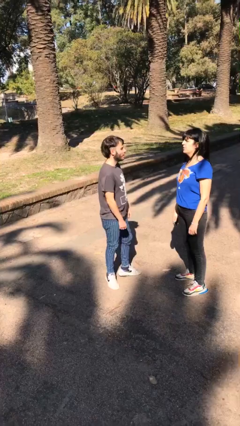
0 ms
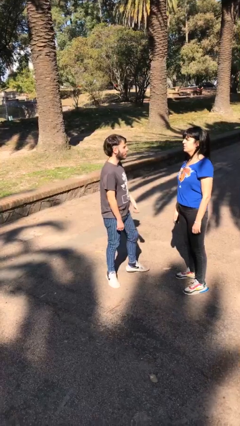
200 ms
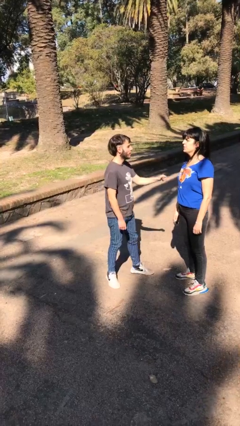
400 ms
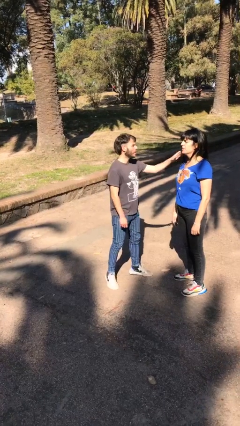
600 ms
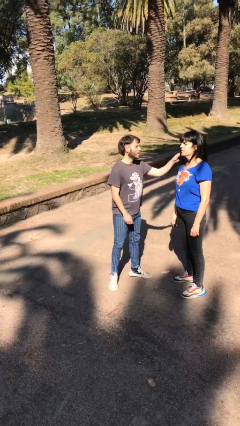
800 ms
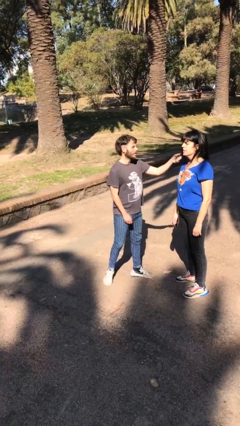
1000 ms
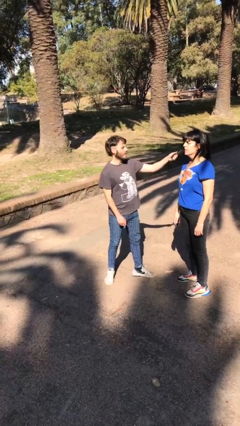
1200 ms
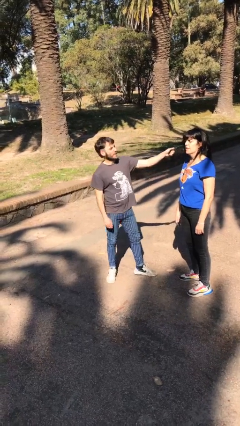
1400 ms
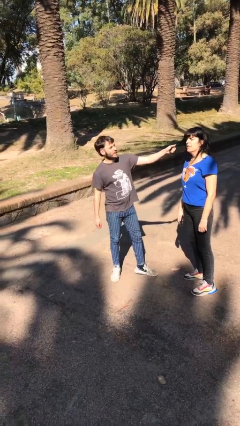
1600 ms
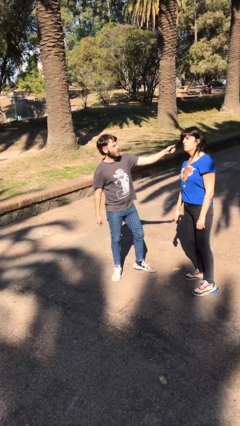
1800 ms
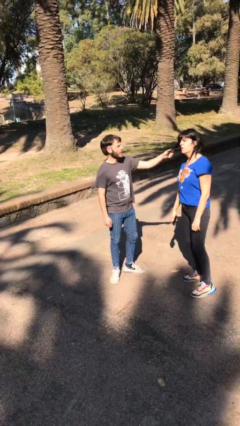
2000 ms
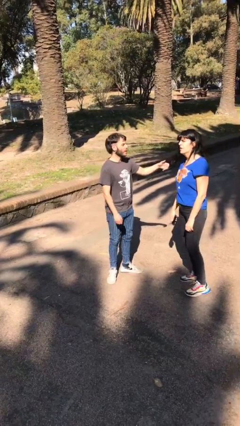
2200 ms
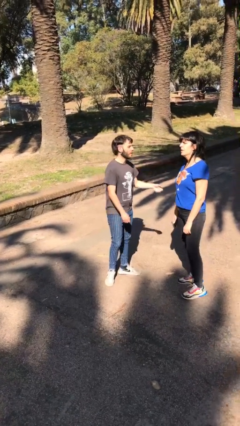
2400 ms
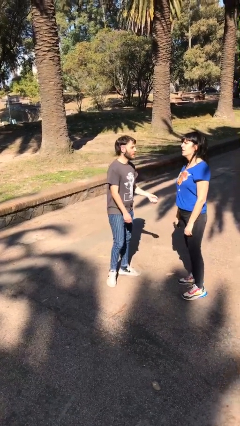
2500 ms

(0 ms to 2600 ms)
person grabs person by hair

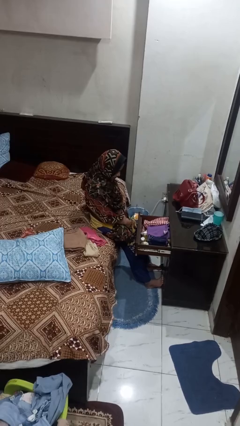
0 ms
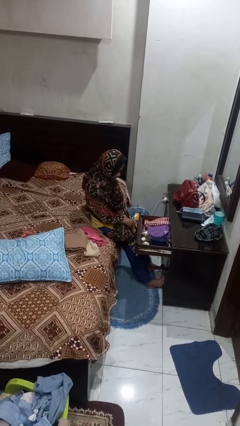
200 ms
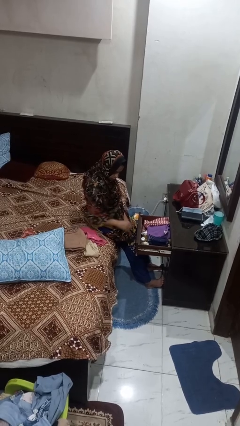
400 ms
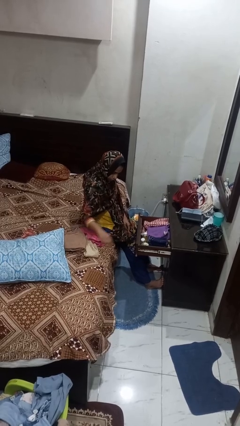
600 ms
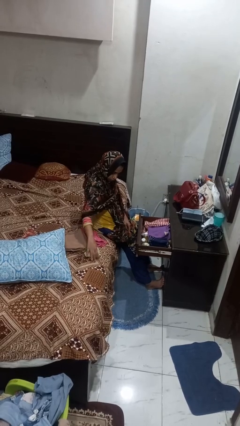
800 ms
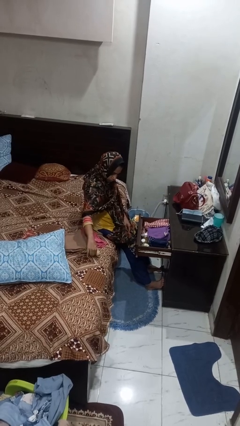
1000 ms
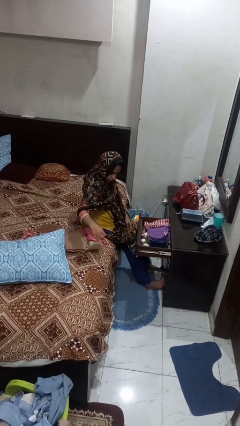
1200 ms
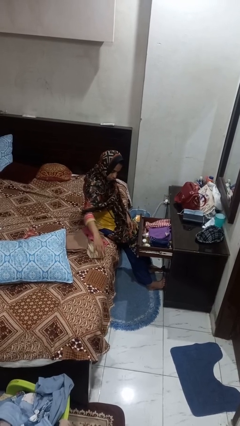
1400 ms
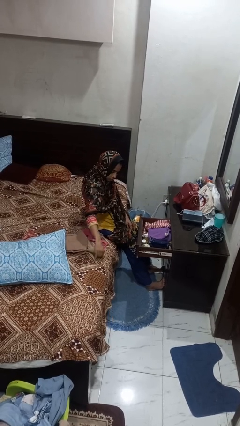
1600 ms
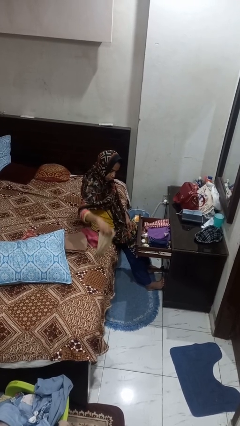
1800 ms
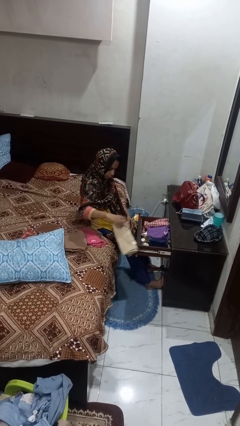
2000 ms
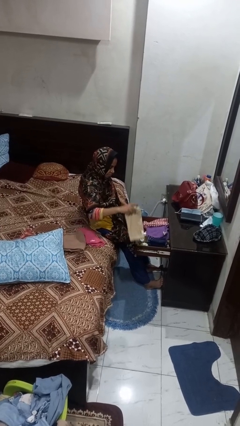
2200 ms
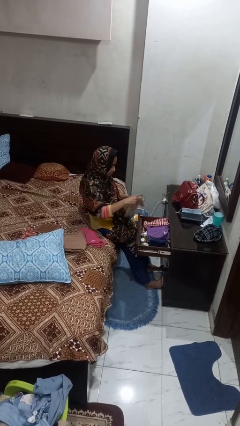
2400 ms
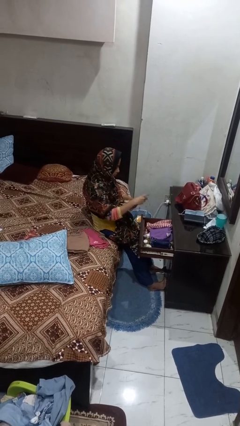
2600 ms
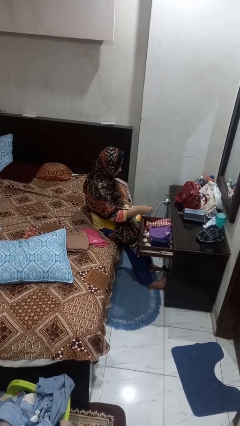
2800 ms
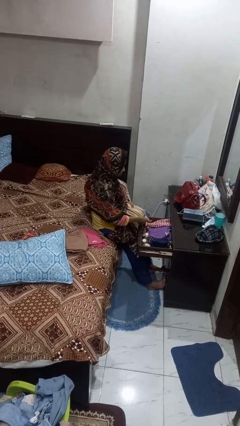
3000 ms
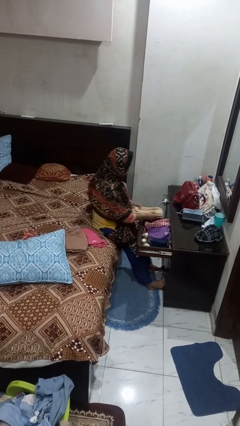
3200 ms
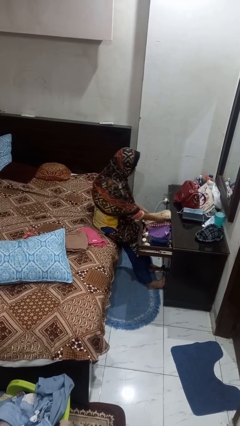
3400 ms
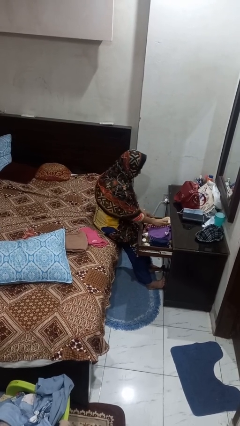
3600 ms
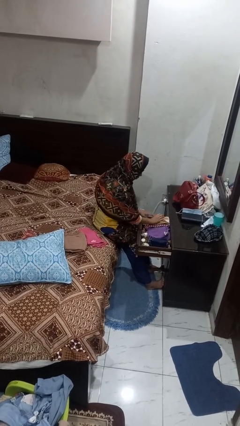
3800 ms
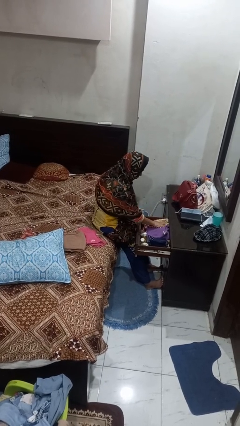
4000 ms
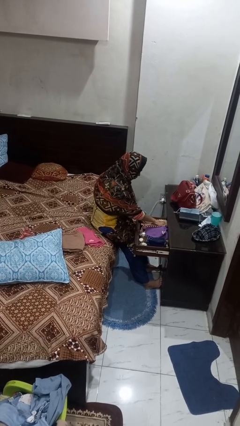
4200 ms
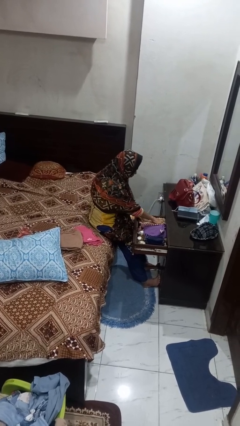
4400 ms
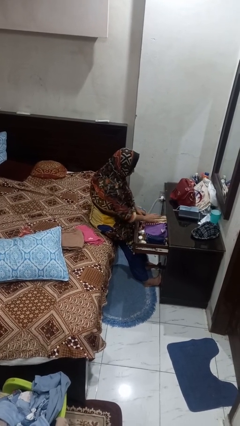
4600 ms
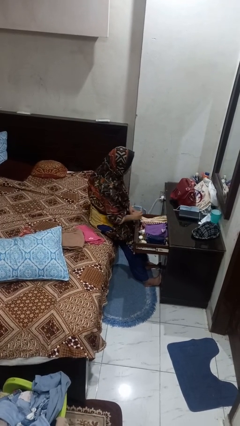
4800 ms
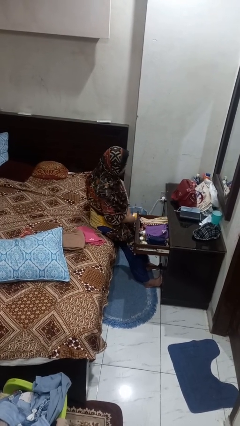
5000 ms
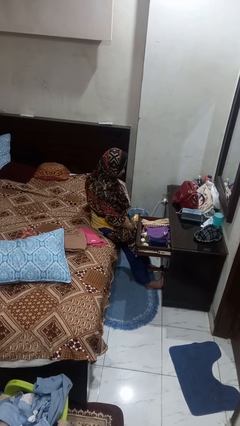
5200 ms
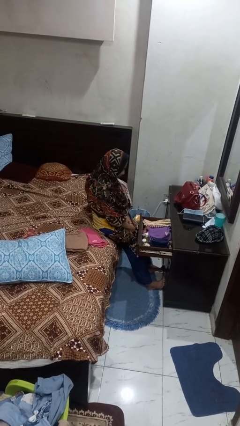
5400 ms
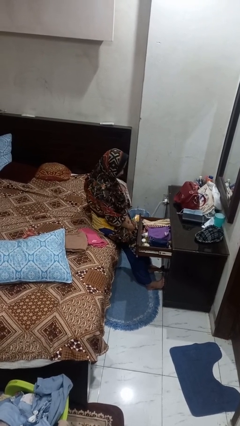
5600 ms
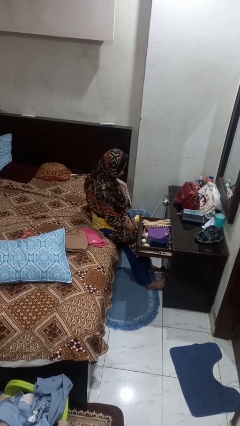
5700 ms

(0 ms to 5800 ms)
person puts clothes into dresser

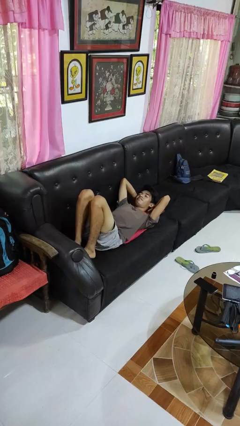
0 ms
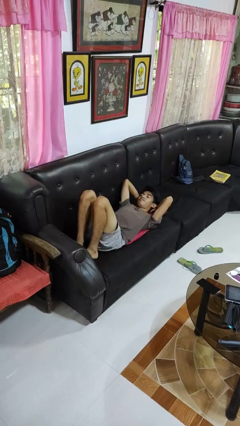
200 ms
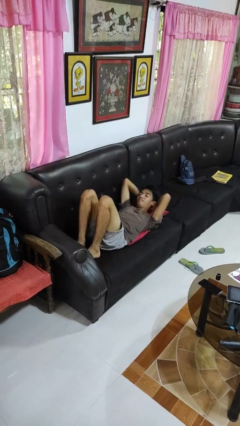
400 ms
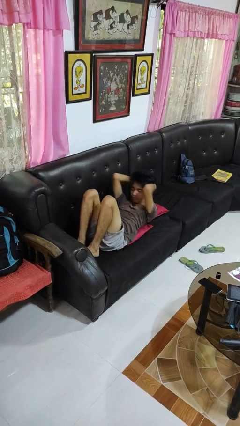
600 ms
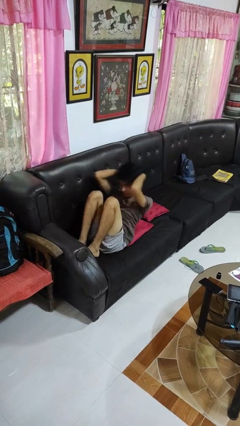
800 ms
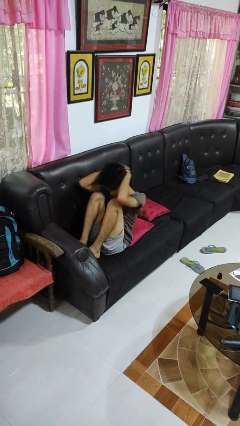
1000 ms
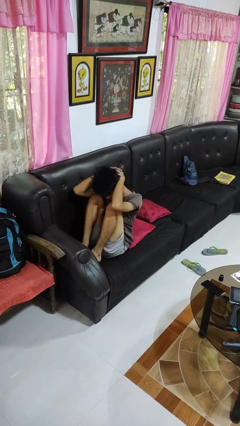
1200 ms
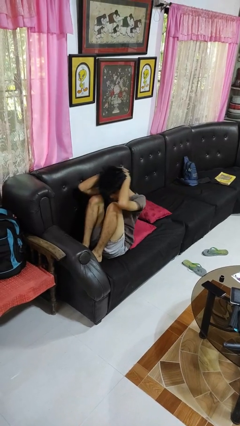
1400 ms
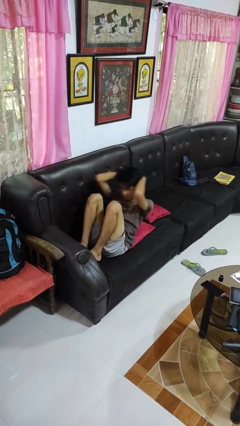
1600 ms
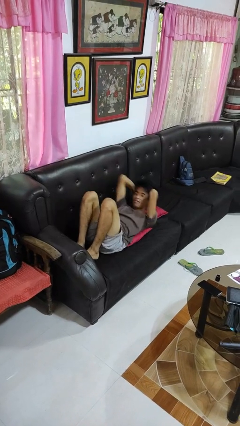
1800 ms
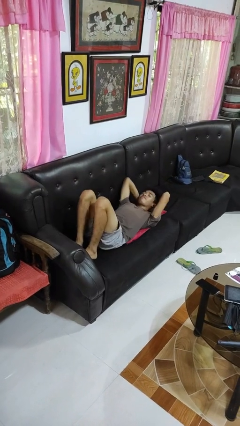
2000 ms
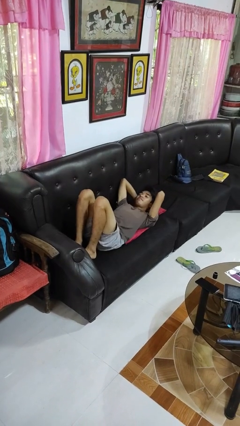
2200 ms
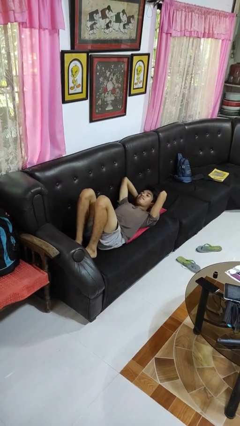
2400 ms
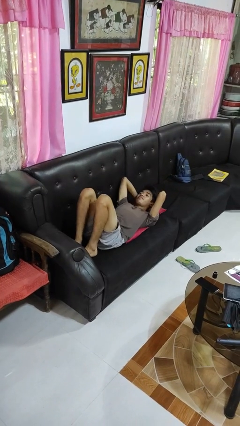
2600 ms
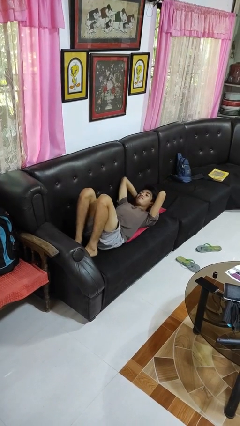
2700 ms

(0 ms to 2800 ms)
person exercises with situp

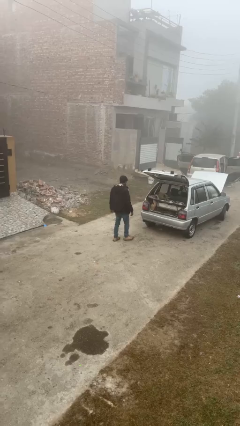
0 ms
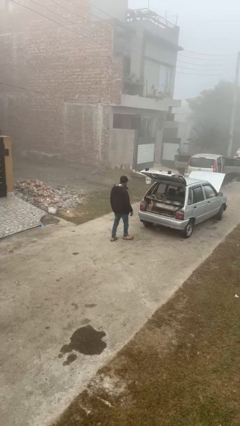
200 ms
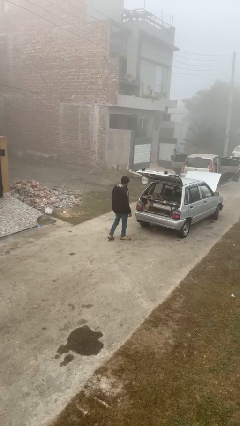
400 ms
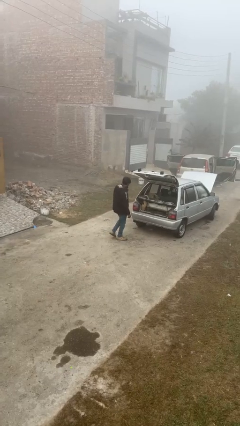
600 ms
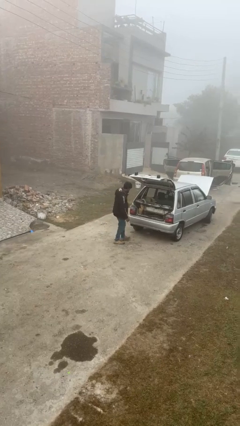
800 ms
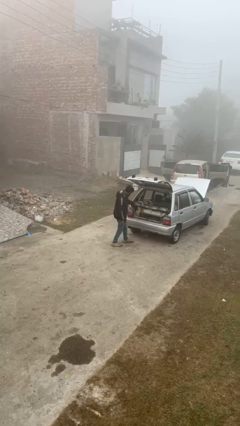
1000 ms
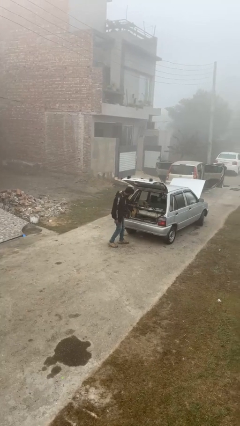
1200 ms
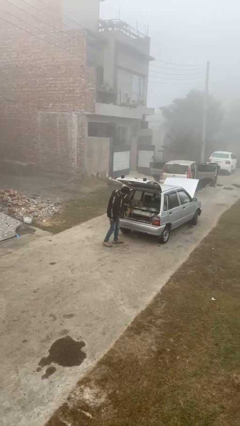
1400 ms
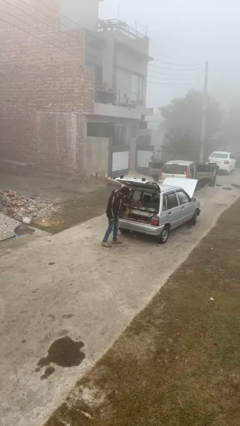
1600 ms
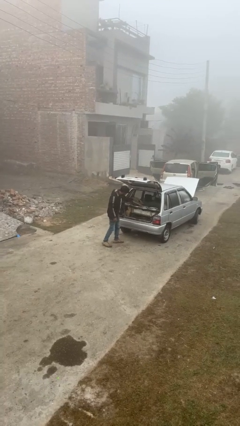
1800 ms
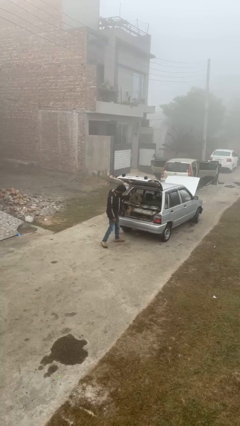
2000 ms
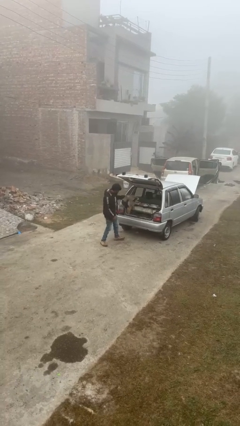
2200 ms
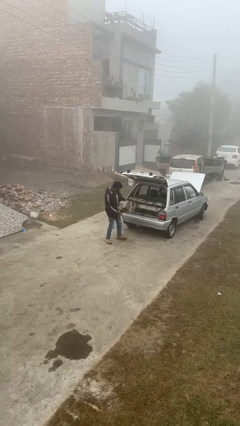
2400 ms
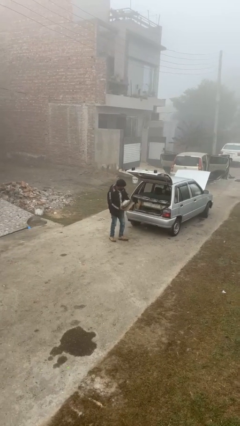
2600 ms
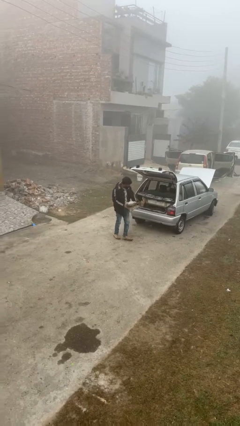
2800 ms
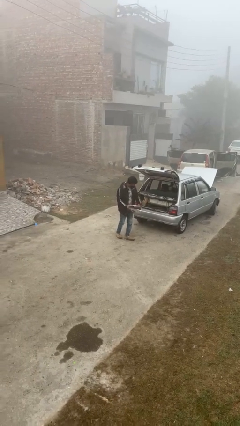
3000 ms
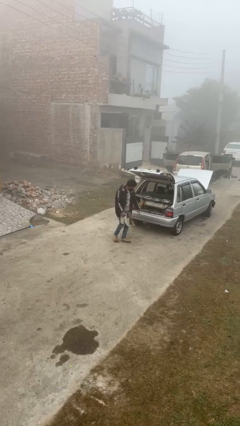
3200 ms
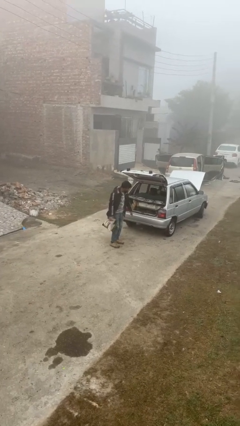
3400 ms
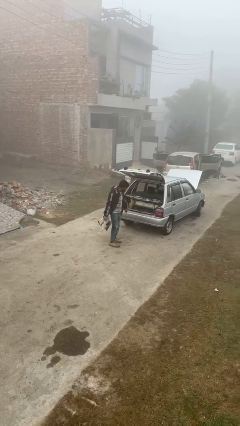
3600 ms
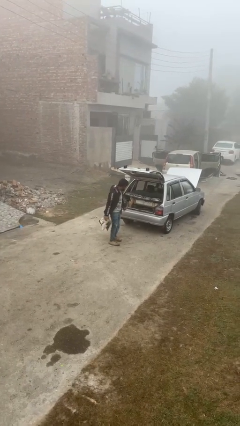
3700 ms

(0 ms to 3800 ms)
person unloads car

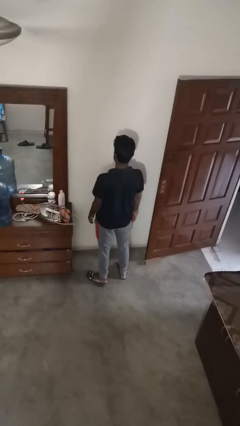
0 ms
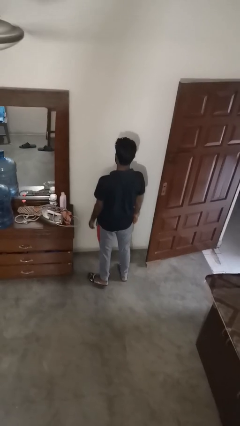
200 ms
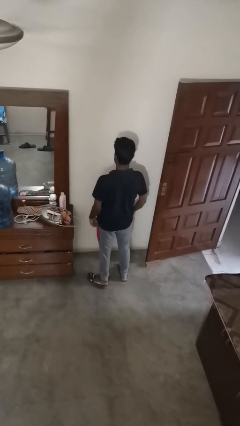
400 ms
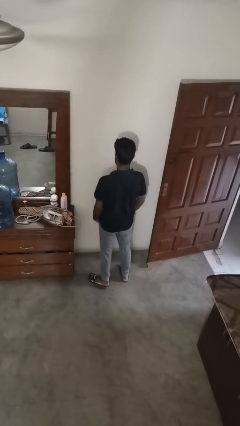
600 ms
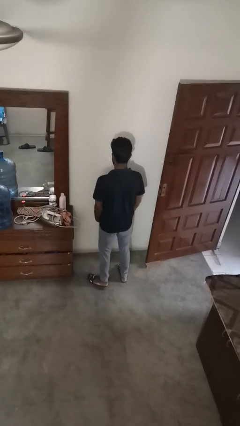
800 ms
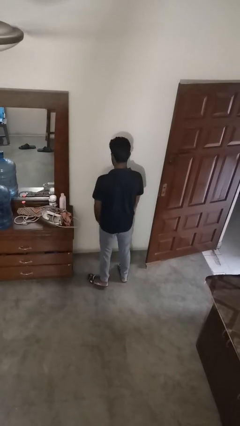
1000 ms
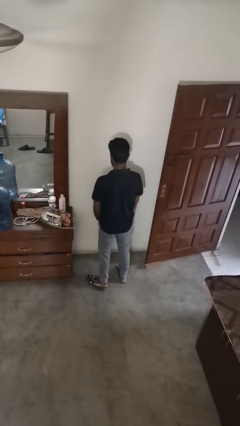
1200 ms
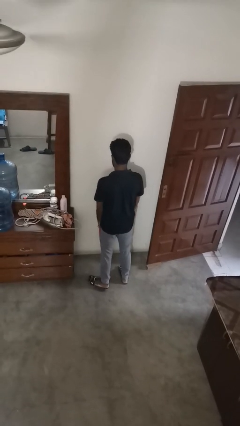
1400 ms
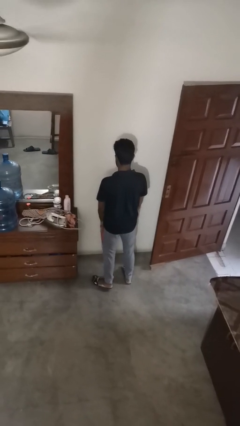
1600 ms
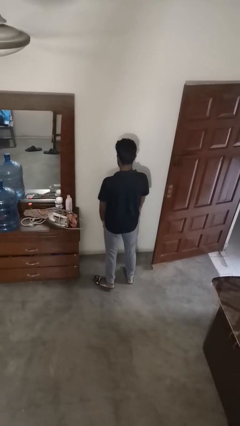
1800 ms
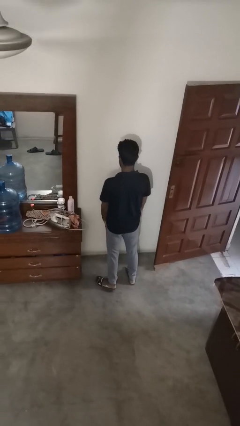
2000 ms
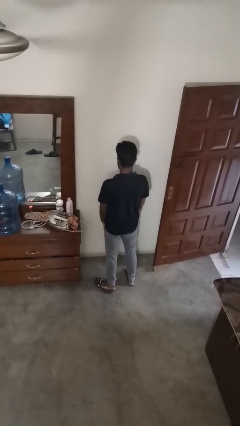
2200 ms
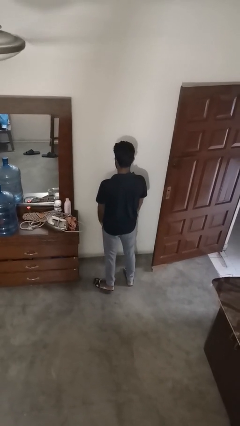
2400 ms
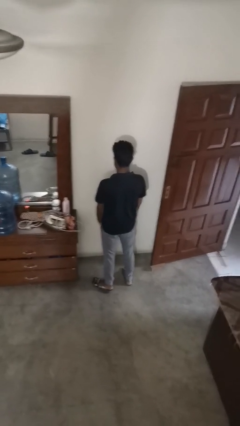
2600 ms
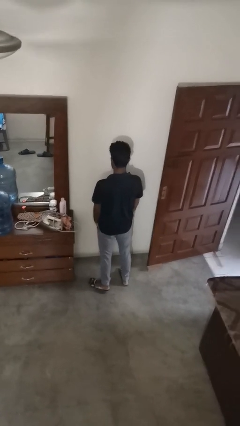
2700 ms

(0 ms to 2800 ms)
person puts hands in back pockets
